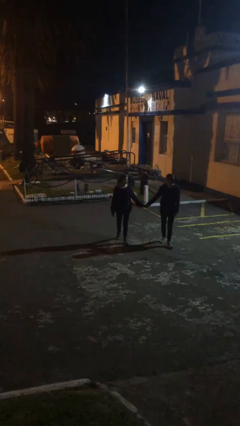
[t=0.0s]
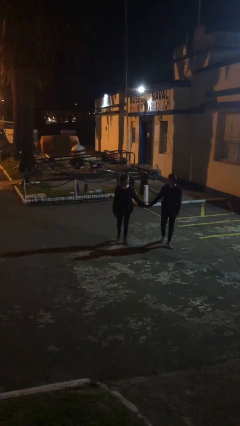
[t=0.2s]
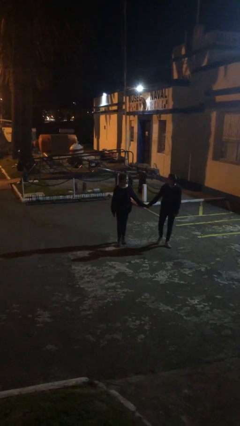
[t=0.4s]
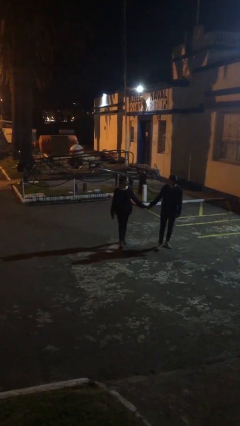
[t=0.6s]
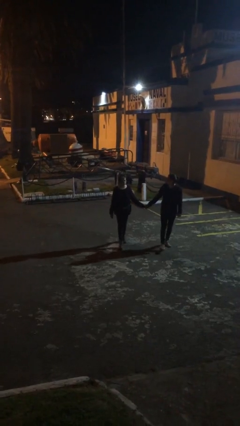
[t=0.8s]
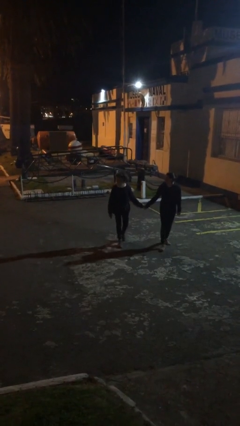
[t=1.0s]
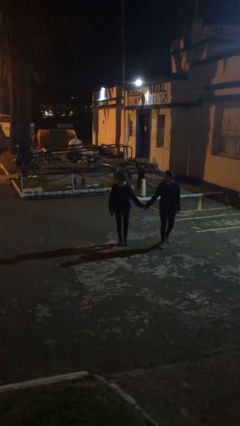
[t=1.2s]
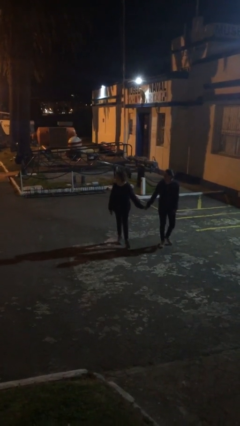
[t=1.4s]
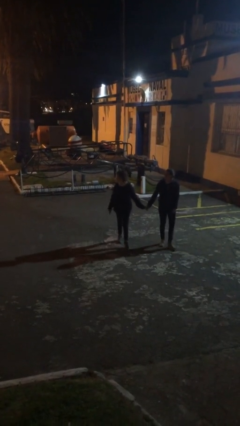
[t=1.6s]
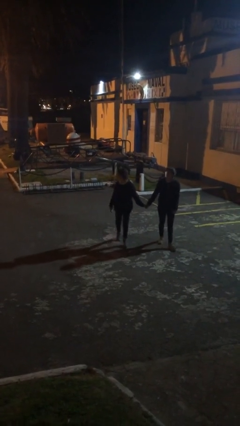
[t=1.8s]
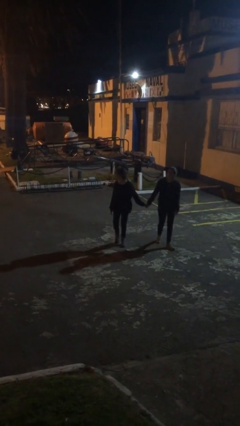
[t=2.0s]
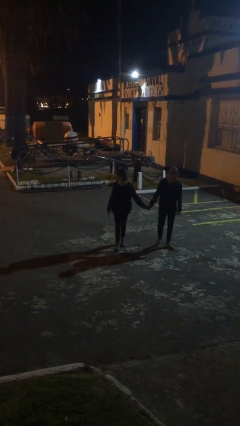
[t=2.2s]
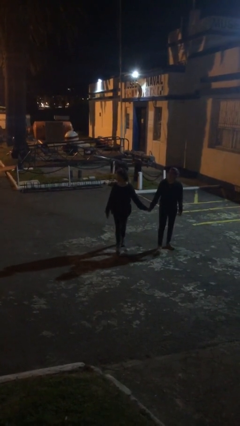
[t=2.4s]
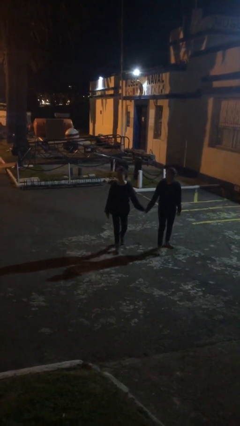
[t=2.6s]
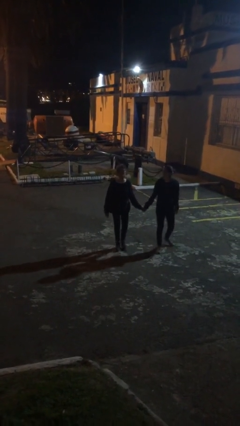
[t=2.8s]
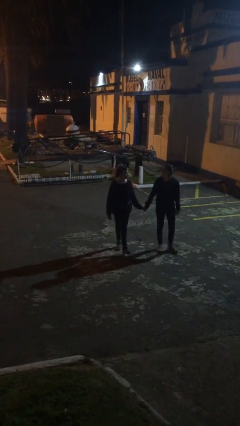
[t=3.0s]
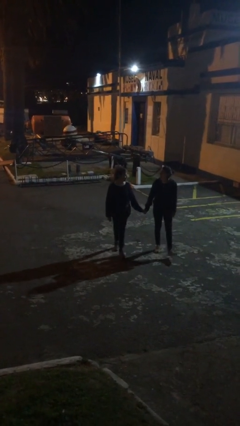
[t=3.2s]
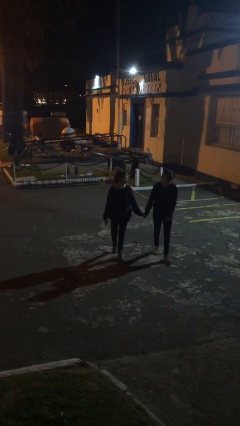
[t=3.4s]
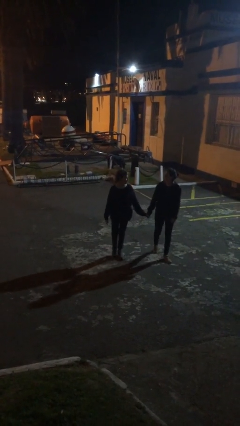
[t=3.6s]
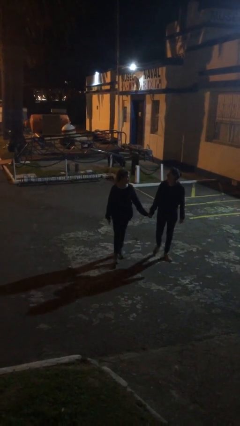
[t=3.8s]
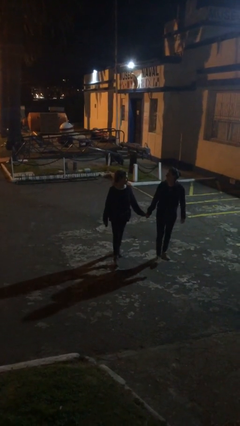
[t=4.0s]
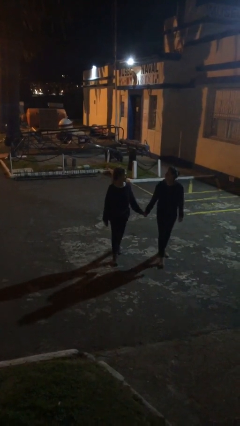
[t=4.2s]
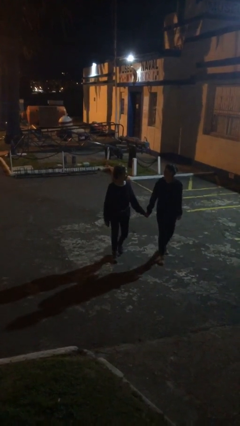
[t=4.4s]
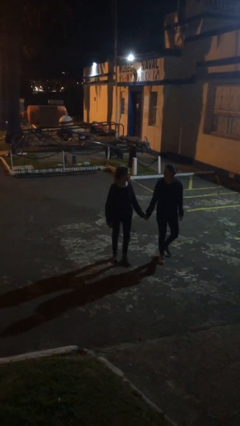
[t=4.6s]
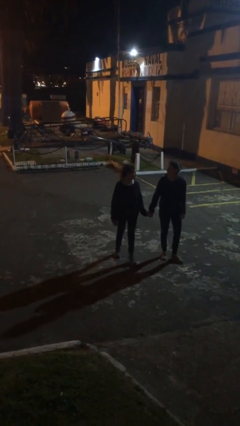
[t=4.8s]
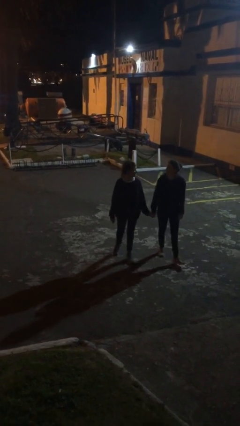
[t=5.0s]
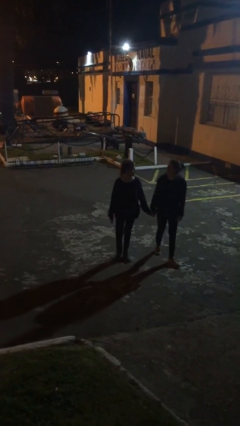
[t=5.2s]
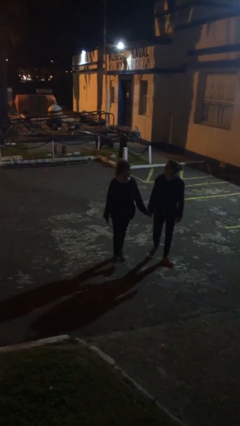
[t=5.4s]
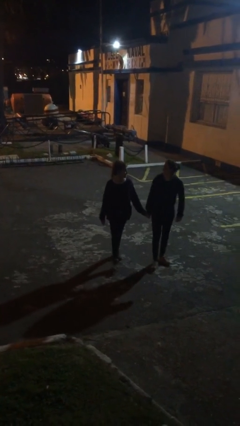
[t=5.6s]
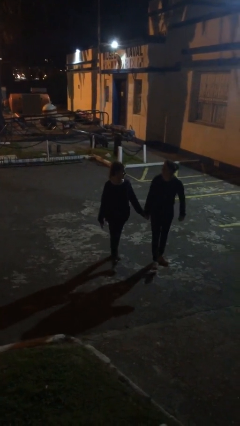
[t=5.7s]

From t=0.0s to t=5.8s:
person holds hand

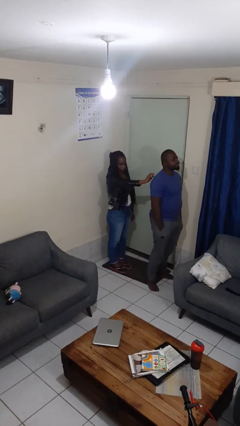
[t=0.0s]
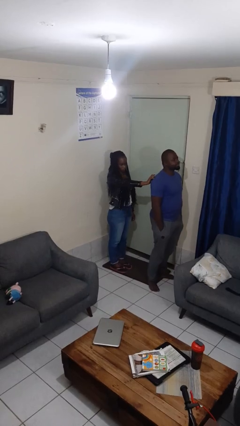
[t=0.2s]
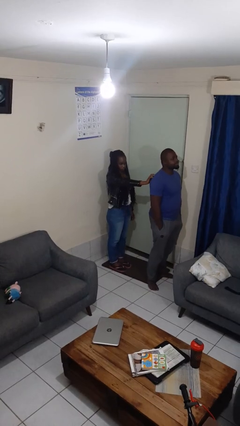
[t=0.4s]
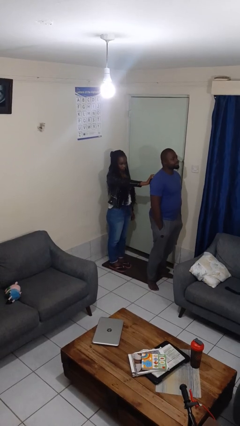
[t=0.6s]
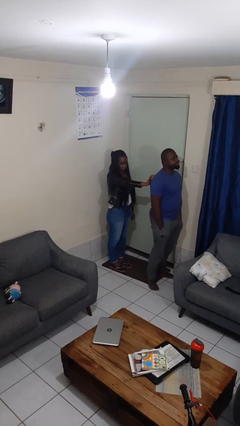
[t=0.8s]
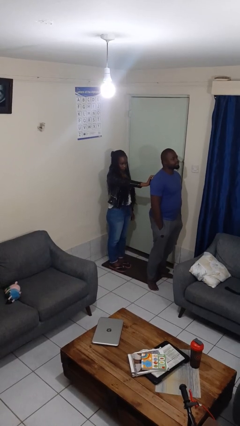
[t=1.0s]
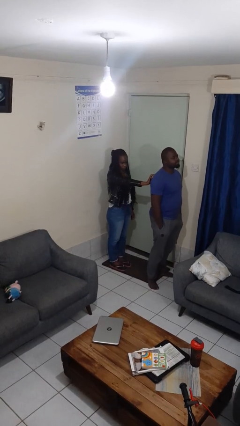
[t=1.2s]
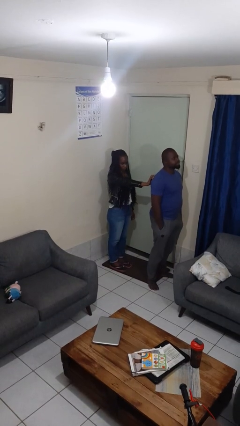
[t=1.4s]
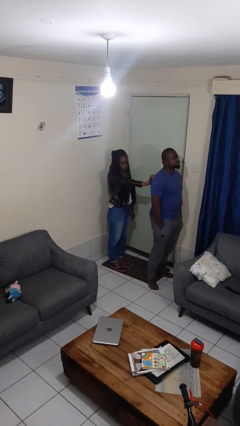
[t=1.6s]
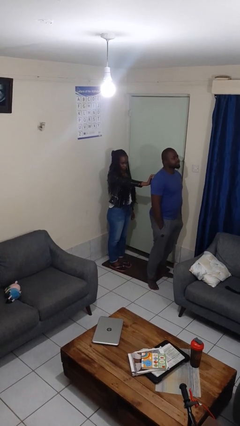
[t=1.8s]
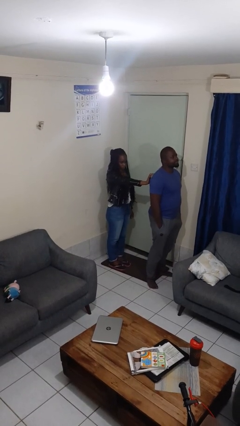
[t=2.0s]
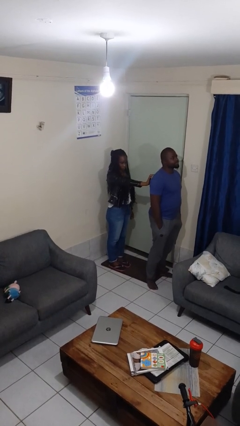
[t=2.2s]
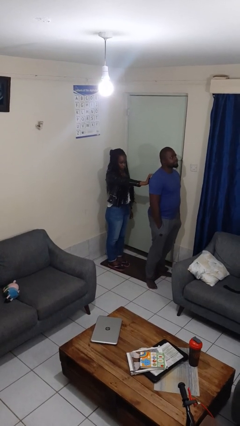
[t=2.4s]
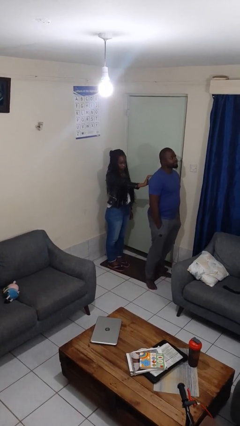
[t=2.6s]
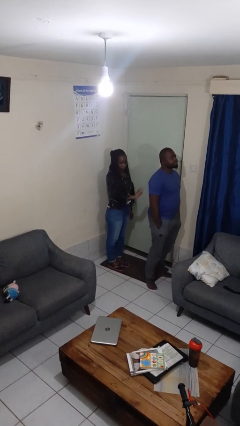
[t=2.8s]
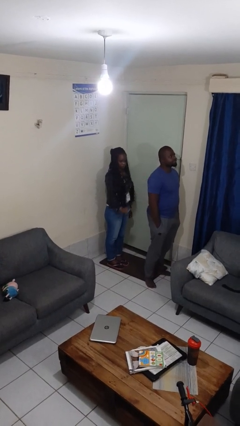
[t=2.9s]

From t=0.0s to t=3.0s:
person touches back of person

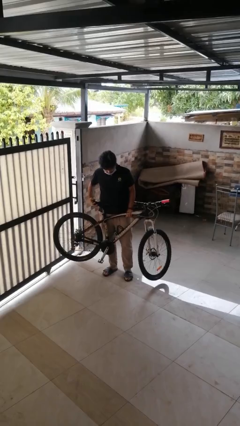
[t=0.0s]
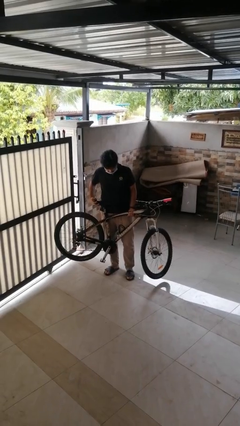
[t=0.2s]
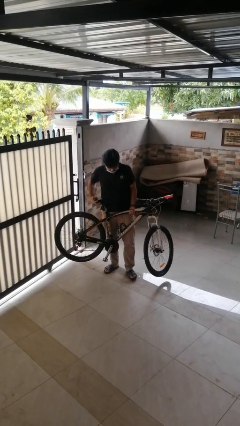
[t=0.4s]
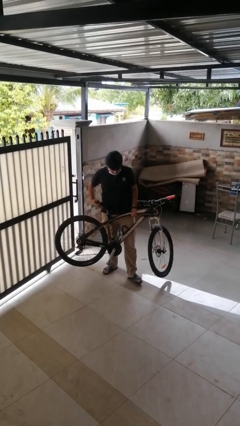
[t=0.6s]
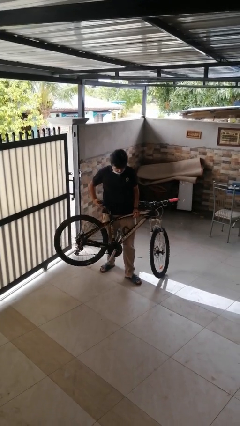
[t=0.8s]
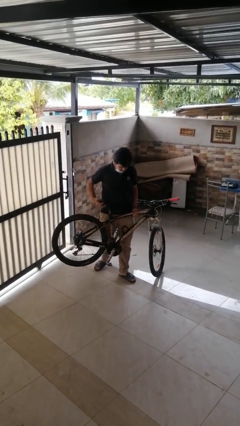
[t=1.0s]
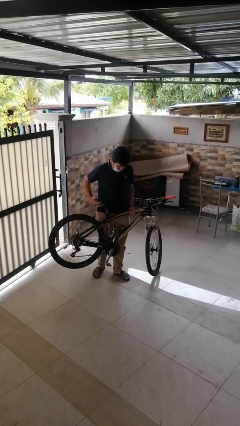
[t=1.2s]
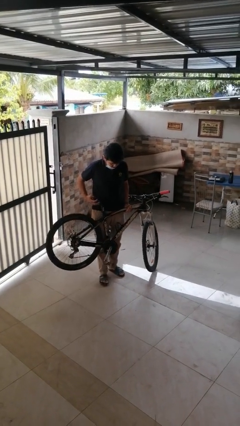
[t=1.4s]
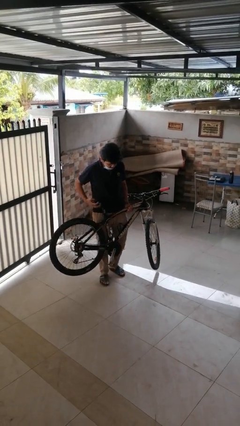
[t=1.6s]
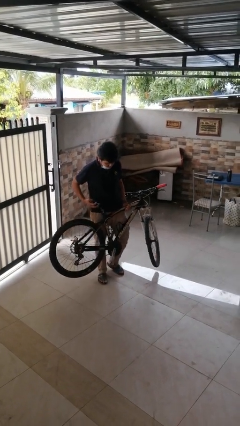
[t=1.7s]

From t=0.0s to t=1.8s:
person carries bicycle

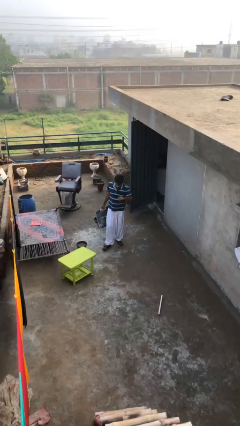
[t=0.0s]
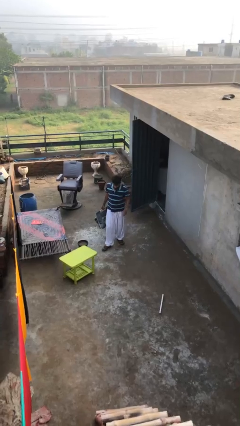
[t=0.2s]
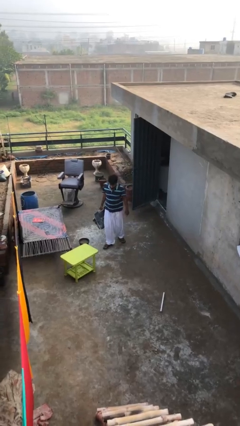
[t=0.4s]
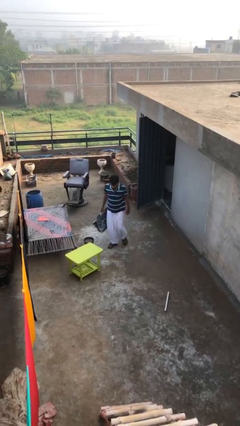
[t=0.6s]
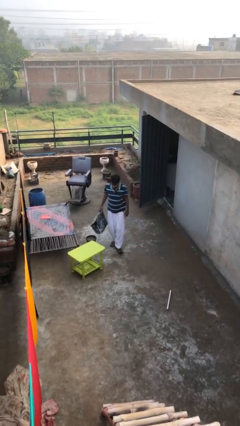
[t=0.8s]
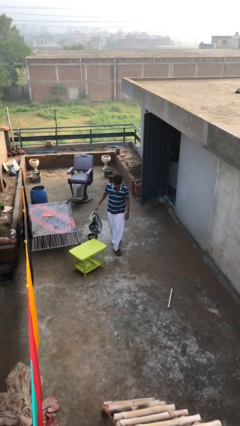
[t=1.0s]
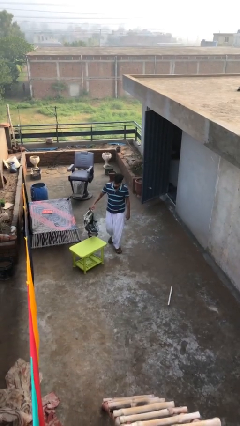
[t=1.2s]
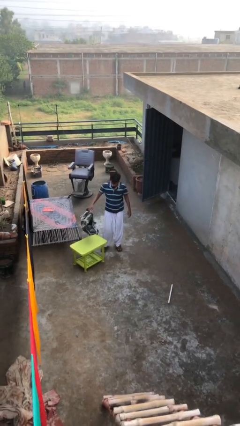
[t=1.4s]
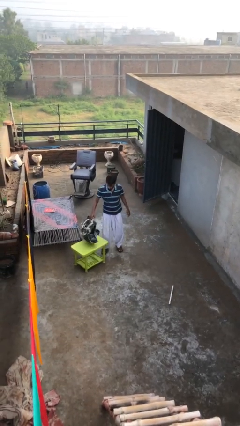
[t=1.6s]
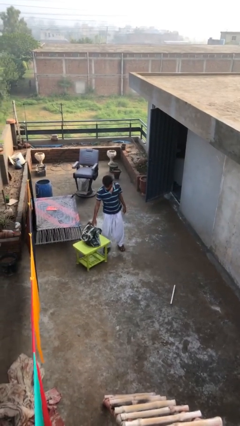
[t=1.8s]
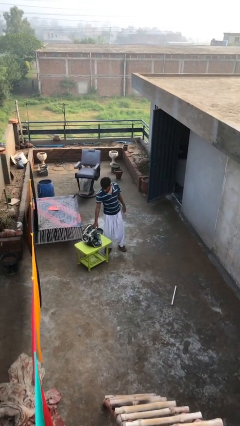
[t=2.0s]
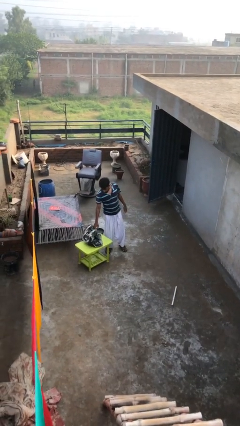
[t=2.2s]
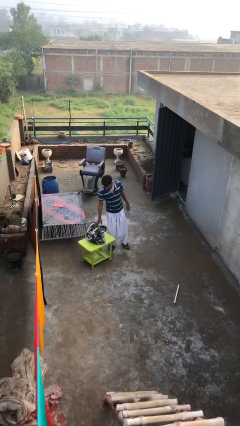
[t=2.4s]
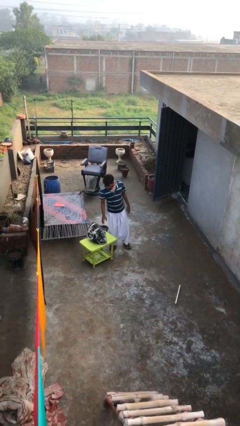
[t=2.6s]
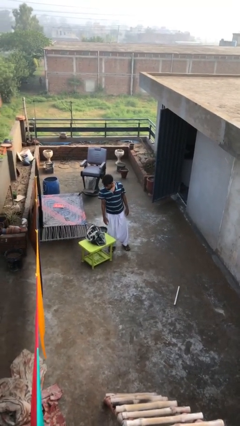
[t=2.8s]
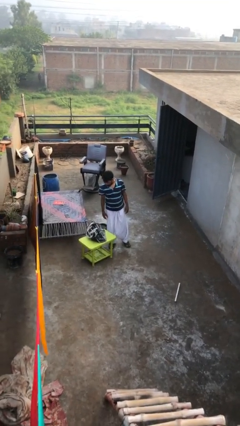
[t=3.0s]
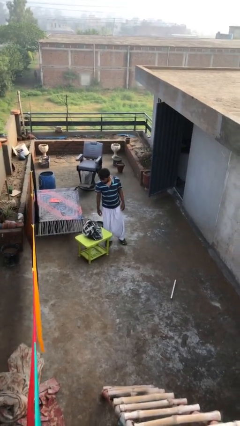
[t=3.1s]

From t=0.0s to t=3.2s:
person puts down object on table

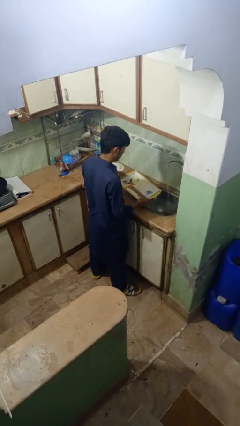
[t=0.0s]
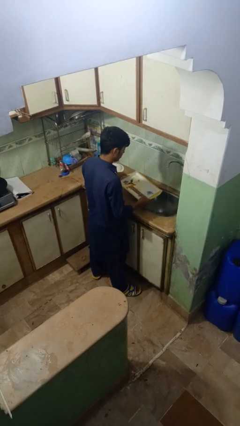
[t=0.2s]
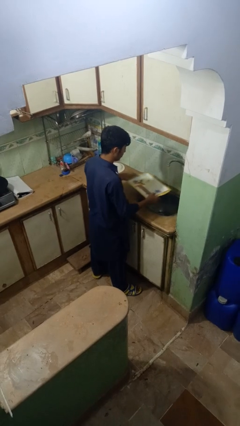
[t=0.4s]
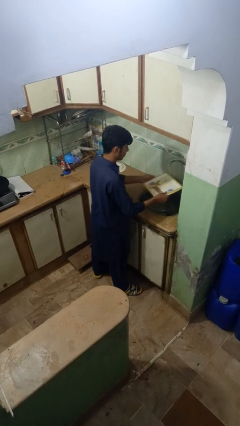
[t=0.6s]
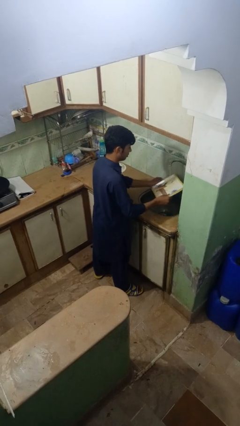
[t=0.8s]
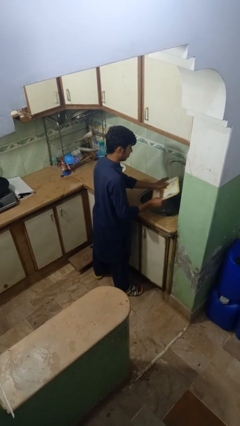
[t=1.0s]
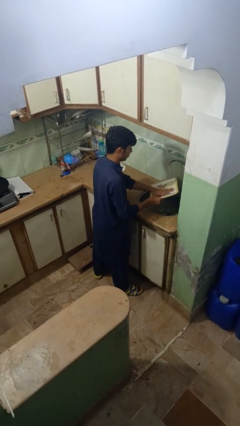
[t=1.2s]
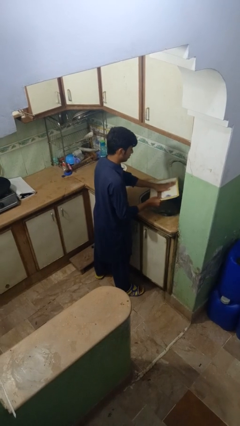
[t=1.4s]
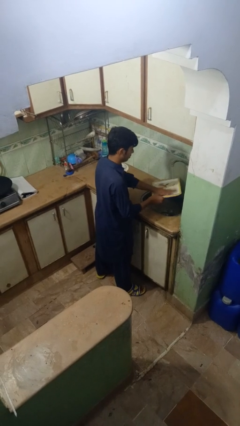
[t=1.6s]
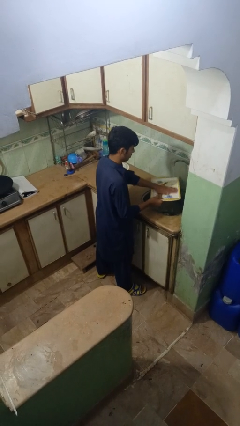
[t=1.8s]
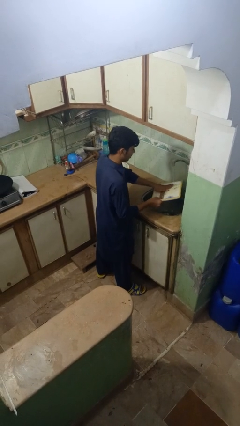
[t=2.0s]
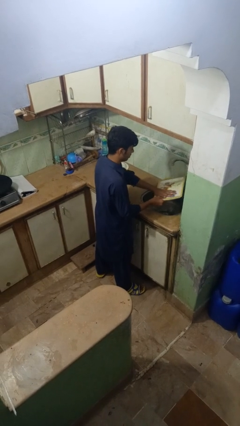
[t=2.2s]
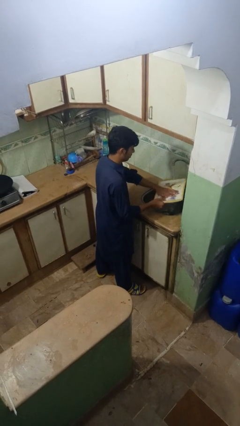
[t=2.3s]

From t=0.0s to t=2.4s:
person washes dish

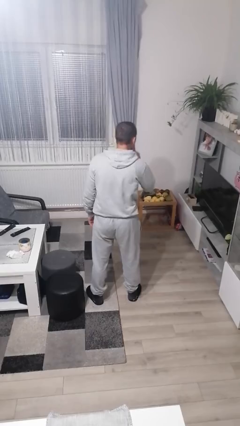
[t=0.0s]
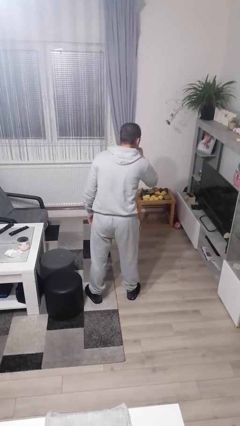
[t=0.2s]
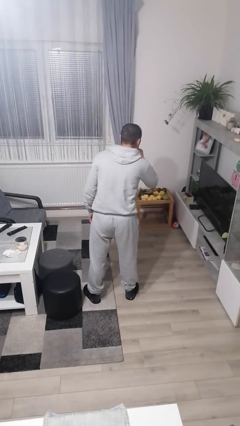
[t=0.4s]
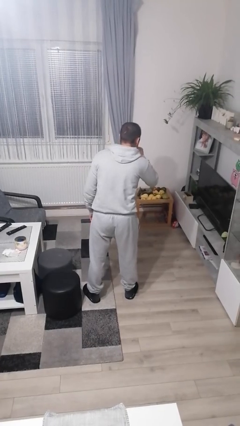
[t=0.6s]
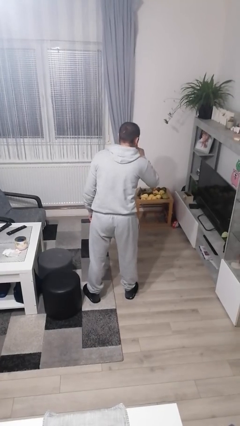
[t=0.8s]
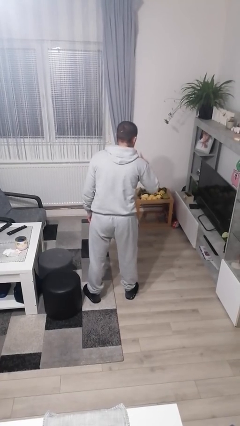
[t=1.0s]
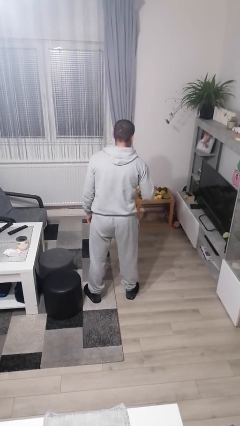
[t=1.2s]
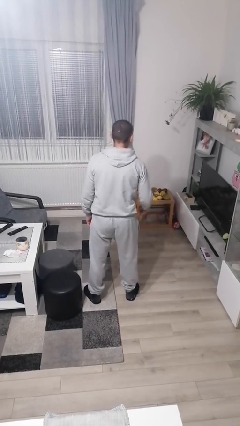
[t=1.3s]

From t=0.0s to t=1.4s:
person gestures be quiet
